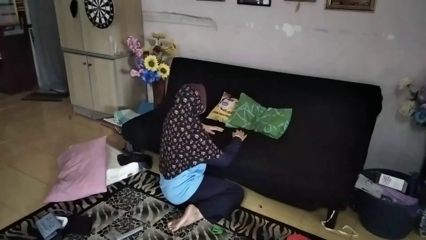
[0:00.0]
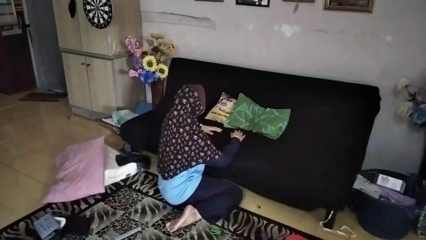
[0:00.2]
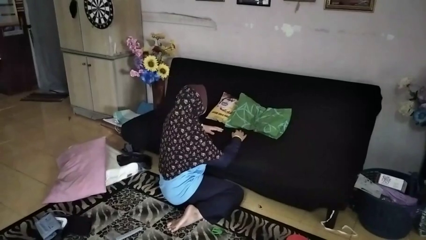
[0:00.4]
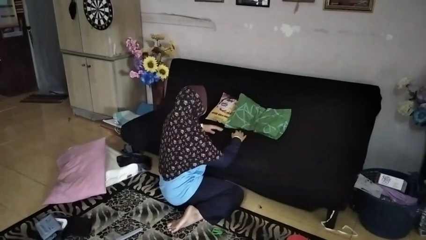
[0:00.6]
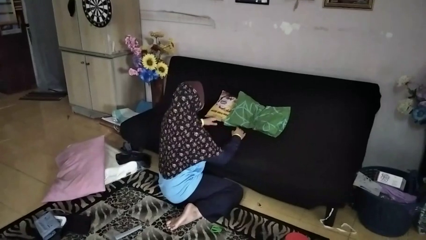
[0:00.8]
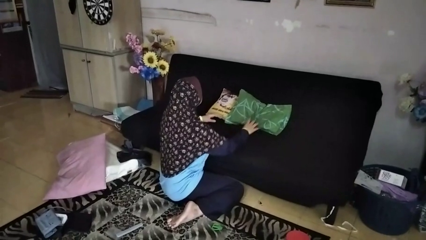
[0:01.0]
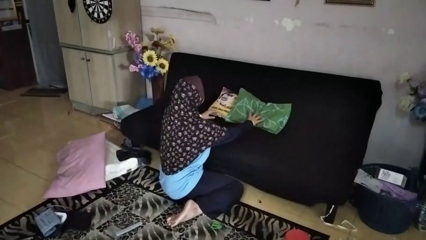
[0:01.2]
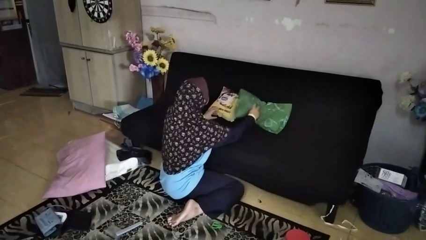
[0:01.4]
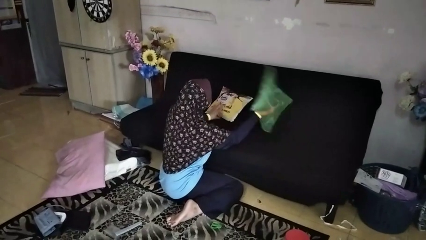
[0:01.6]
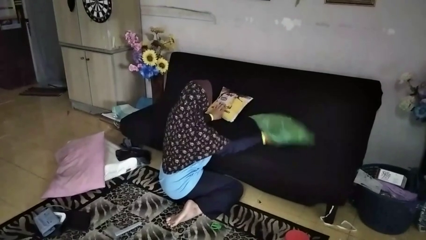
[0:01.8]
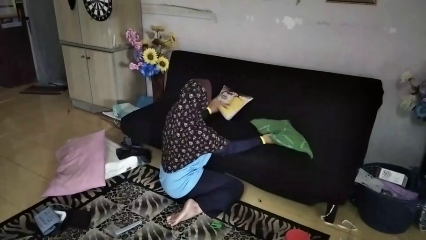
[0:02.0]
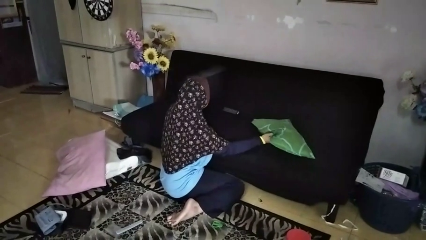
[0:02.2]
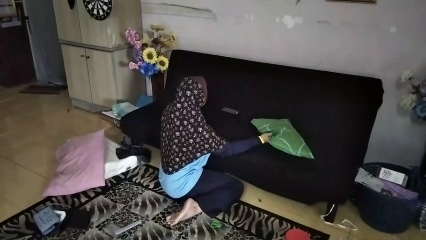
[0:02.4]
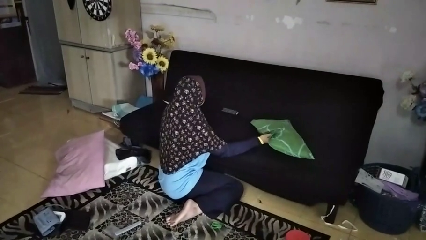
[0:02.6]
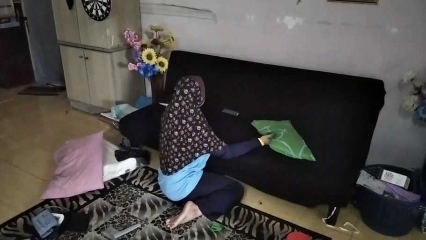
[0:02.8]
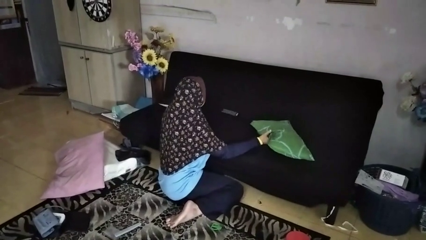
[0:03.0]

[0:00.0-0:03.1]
person searches in couch

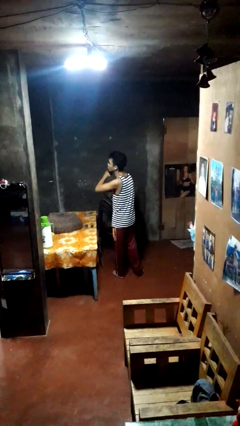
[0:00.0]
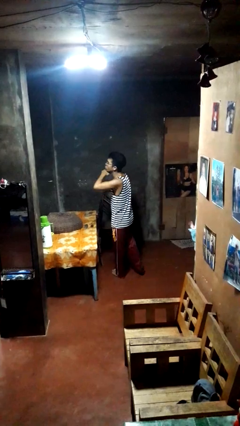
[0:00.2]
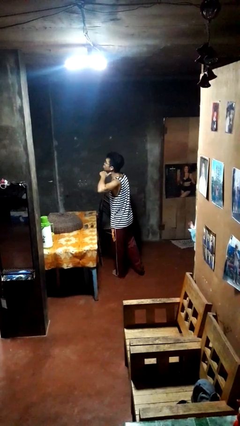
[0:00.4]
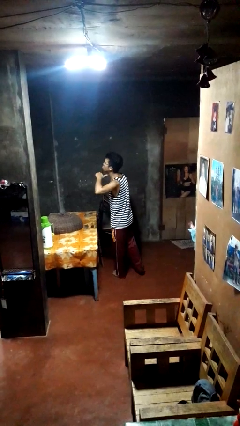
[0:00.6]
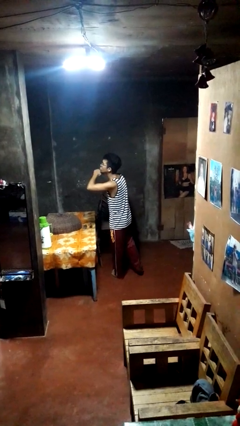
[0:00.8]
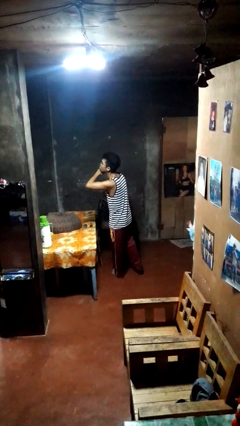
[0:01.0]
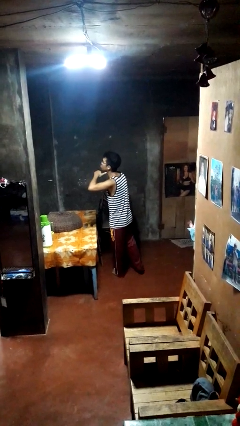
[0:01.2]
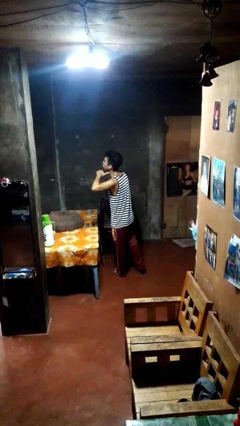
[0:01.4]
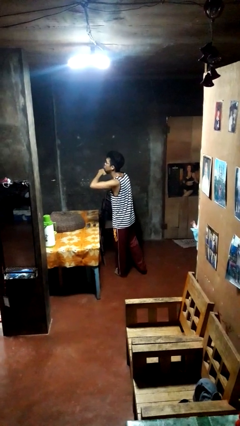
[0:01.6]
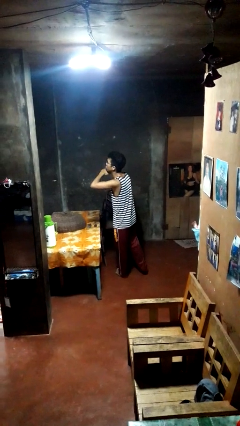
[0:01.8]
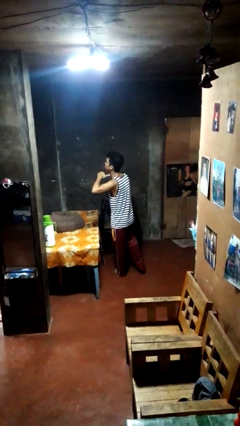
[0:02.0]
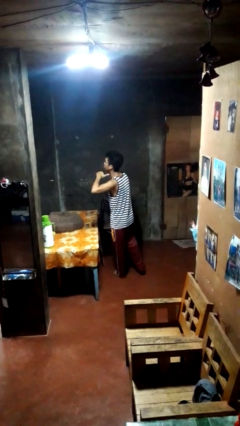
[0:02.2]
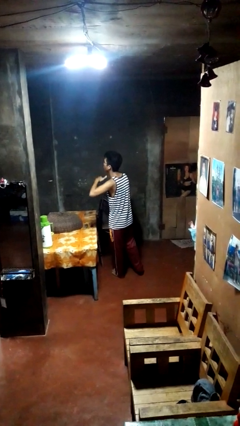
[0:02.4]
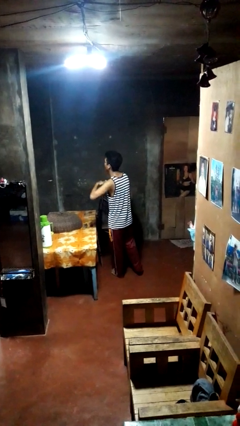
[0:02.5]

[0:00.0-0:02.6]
person gestures cut

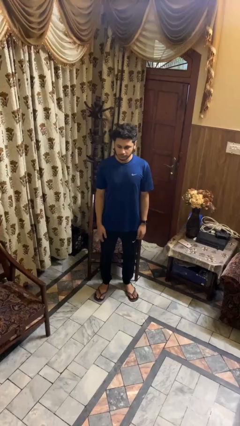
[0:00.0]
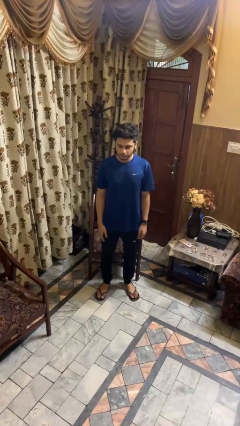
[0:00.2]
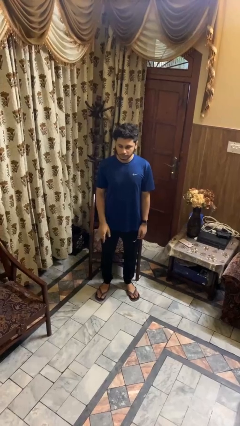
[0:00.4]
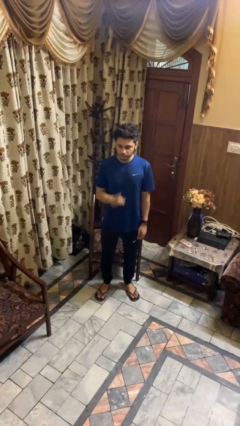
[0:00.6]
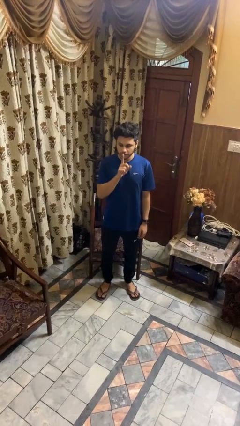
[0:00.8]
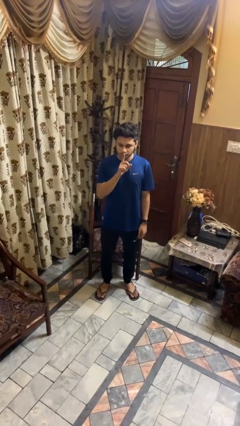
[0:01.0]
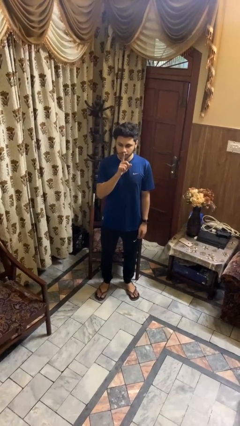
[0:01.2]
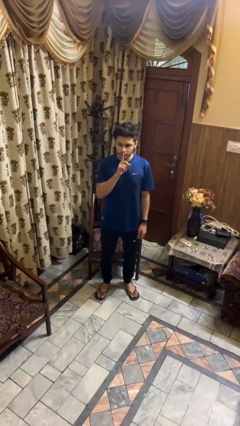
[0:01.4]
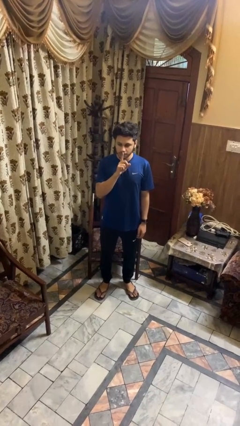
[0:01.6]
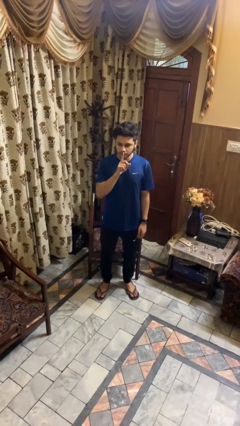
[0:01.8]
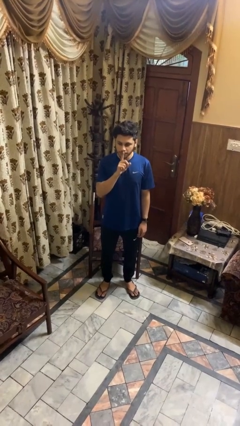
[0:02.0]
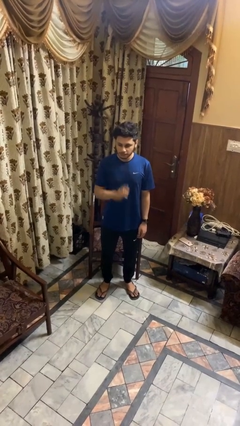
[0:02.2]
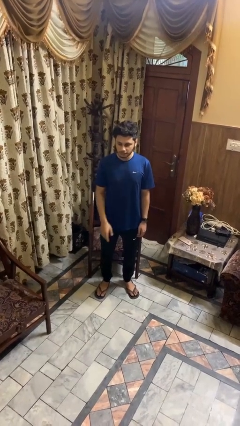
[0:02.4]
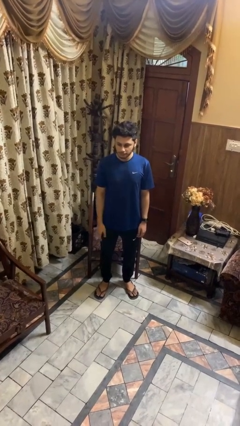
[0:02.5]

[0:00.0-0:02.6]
person gestures be quiet

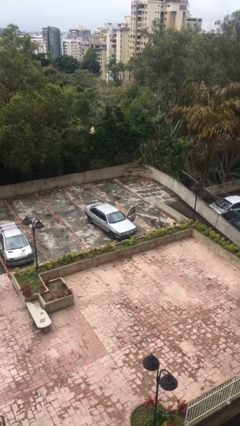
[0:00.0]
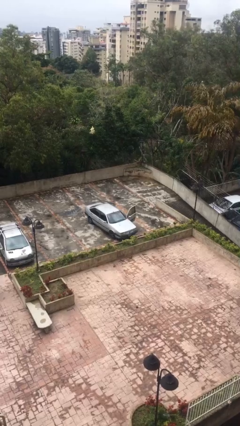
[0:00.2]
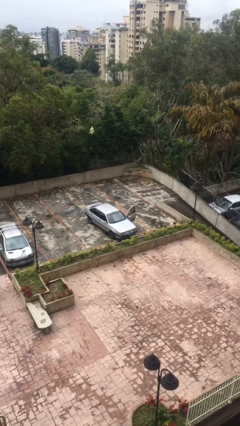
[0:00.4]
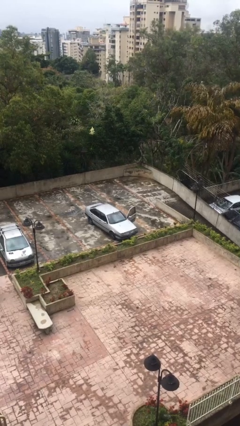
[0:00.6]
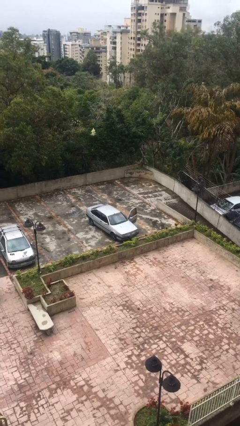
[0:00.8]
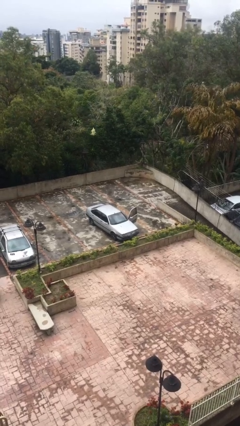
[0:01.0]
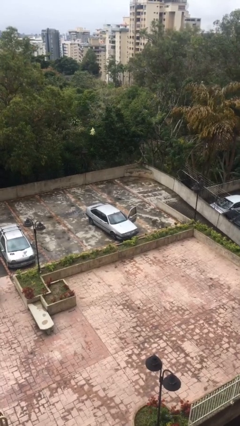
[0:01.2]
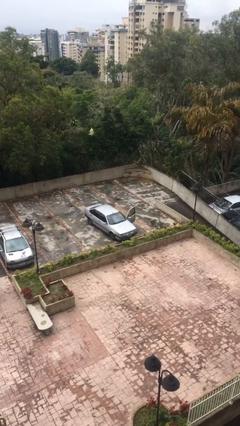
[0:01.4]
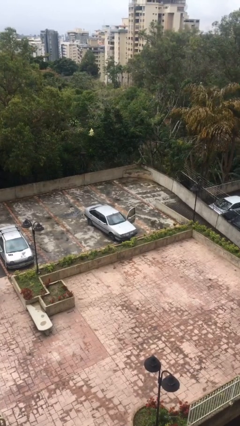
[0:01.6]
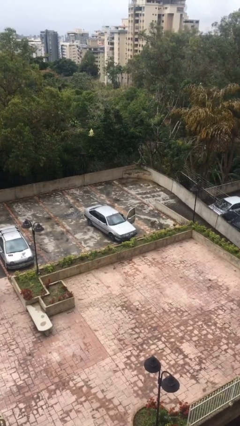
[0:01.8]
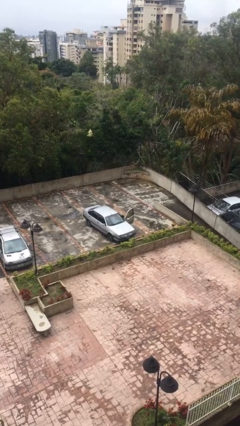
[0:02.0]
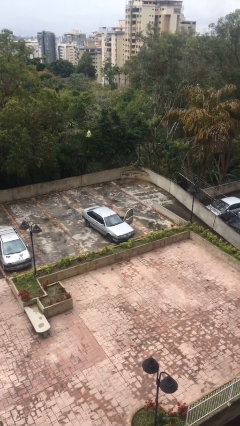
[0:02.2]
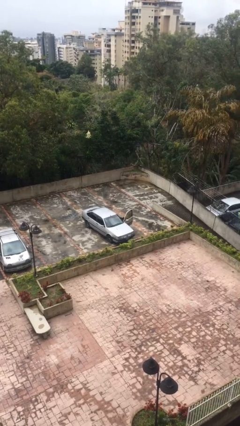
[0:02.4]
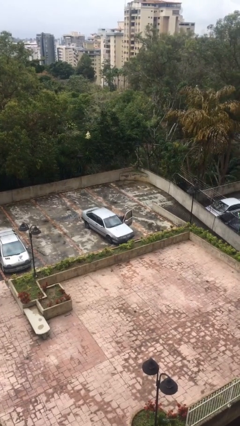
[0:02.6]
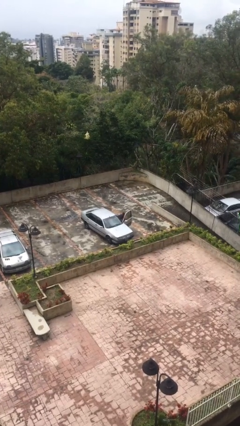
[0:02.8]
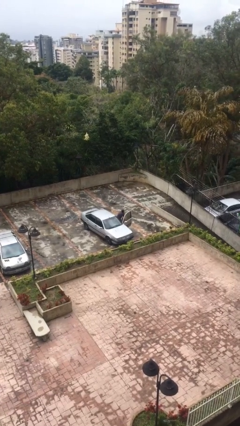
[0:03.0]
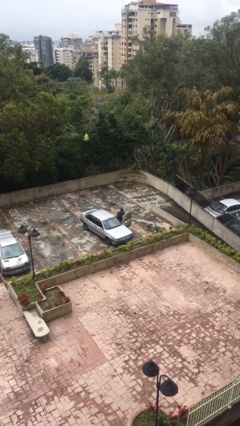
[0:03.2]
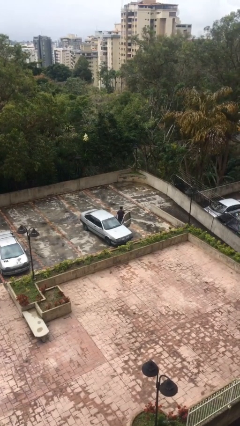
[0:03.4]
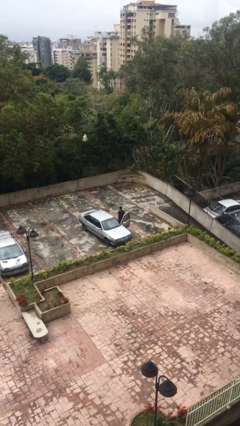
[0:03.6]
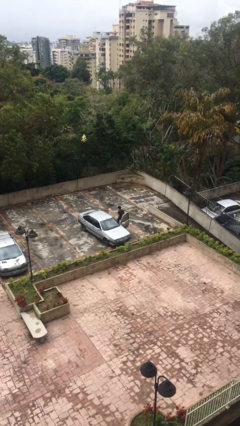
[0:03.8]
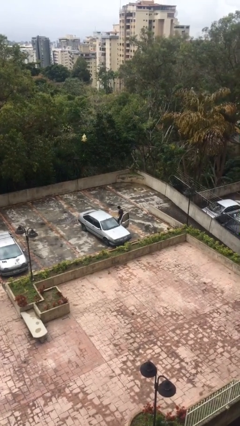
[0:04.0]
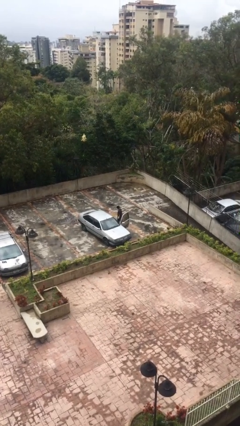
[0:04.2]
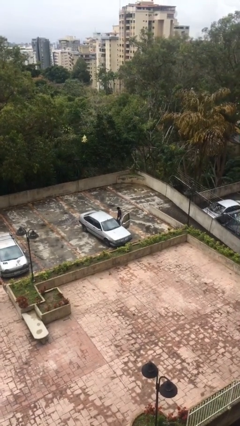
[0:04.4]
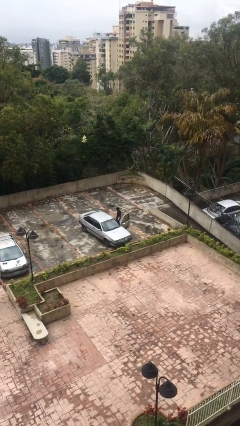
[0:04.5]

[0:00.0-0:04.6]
person exits car

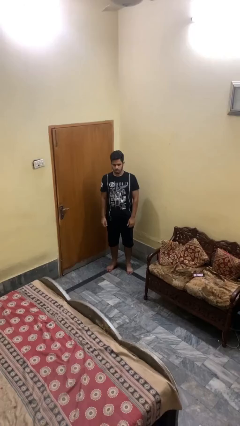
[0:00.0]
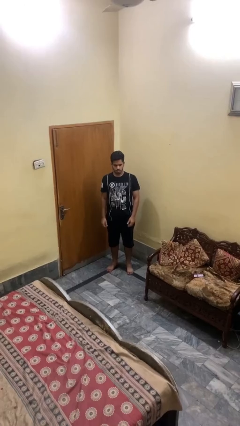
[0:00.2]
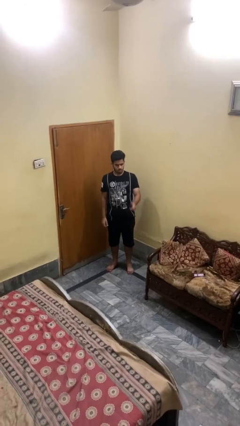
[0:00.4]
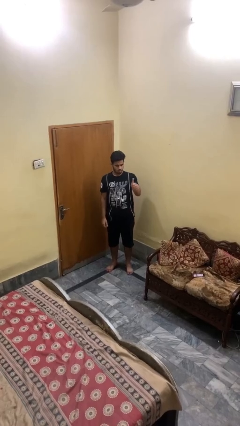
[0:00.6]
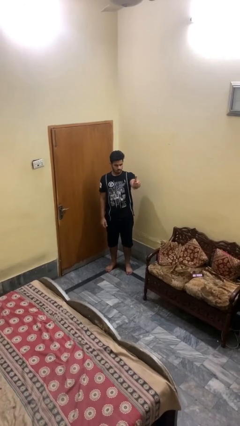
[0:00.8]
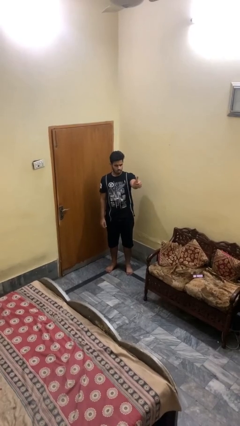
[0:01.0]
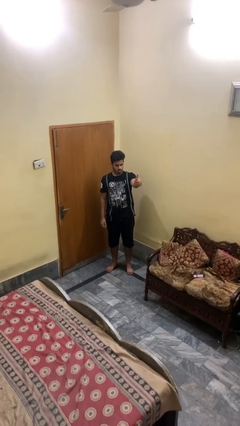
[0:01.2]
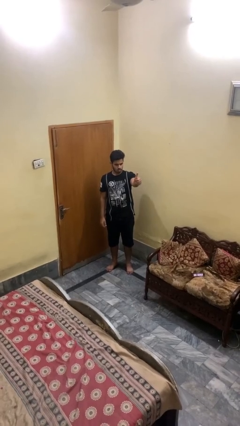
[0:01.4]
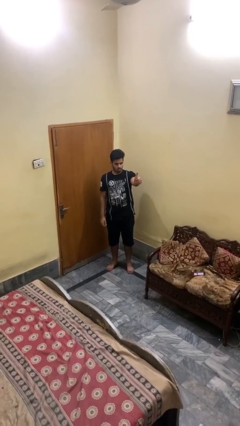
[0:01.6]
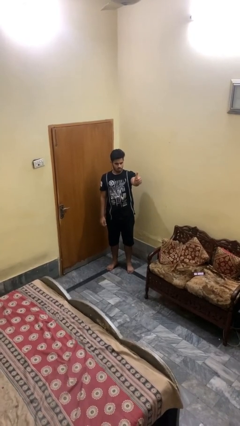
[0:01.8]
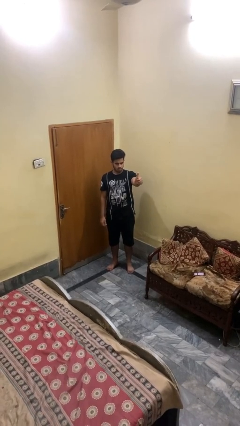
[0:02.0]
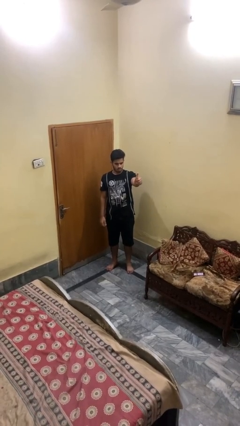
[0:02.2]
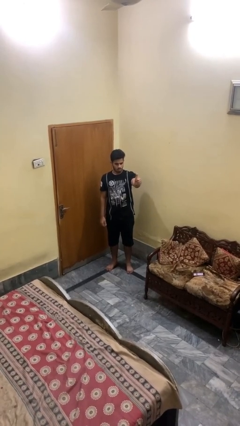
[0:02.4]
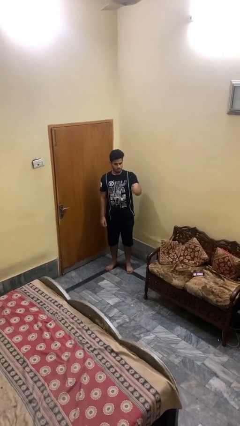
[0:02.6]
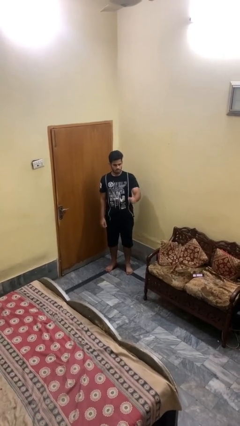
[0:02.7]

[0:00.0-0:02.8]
person gestures thumbs up

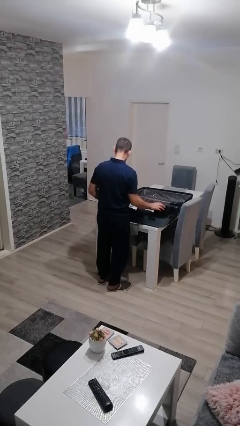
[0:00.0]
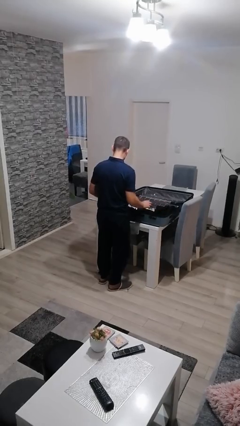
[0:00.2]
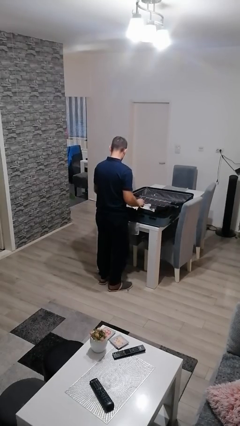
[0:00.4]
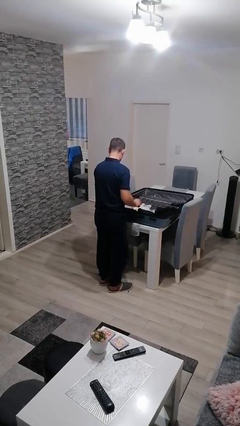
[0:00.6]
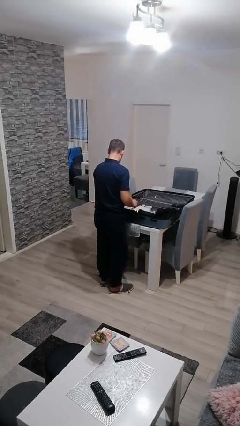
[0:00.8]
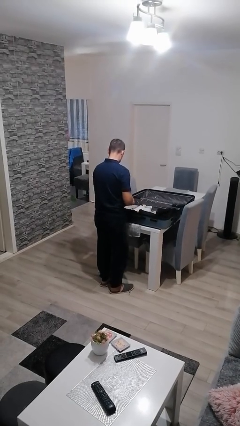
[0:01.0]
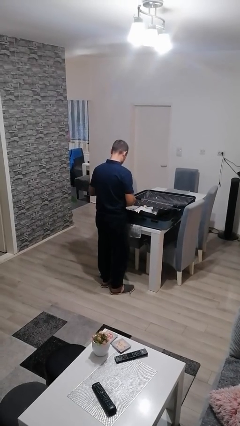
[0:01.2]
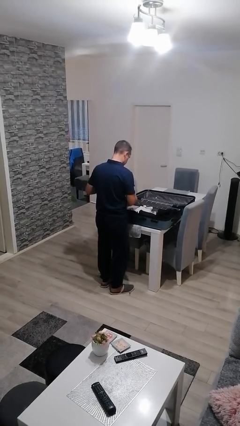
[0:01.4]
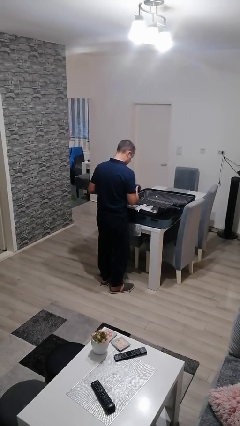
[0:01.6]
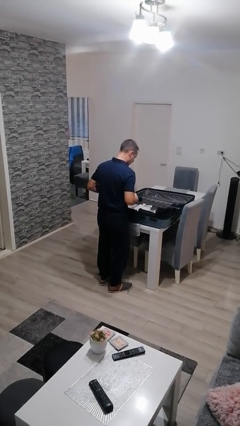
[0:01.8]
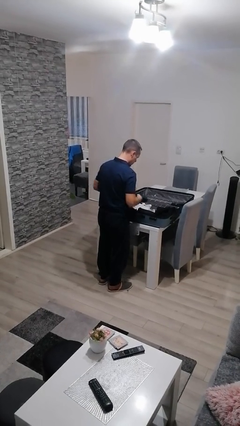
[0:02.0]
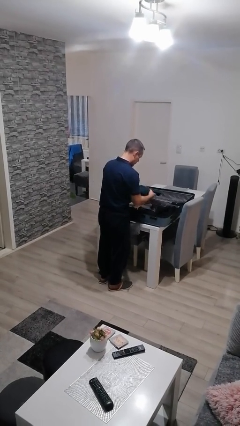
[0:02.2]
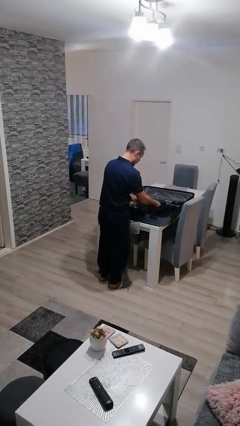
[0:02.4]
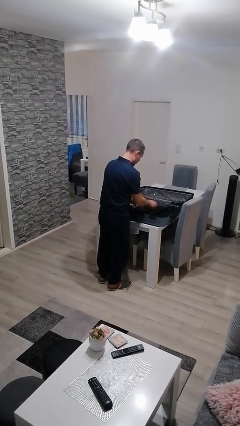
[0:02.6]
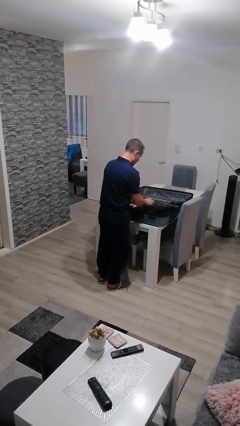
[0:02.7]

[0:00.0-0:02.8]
person loads clothes into suitcase
